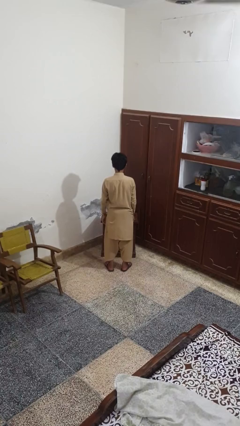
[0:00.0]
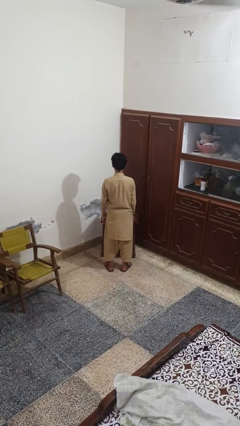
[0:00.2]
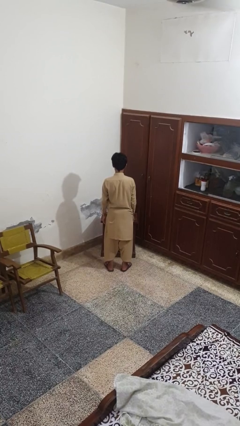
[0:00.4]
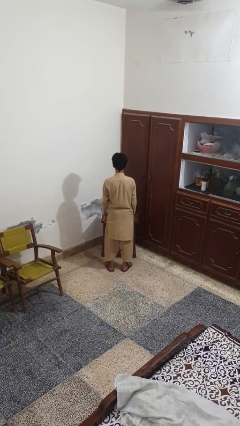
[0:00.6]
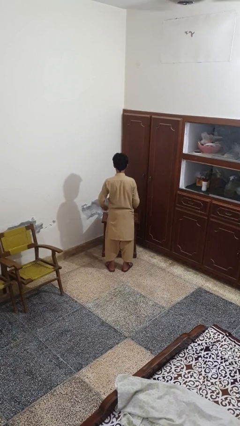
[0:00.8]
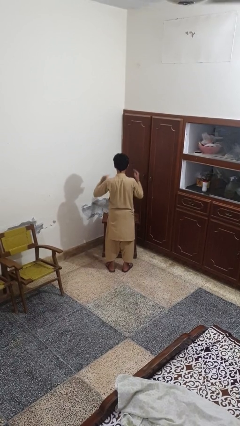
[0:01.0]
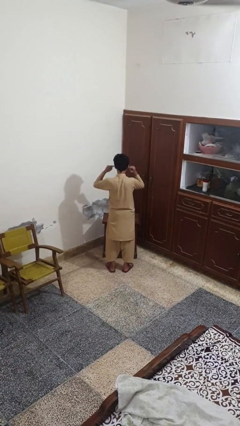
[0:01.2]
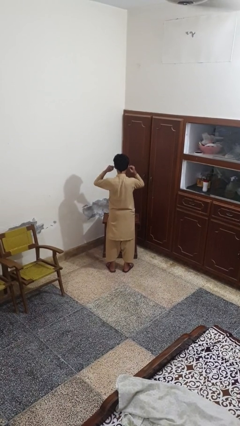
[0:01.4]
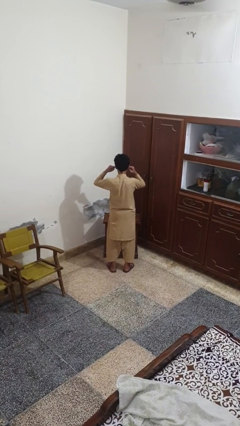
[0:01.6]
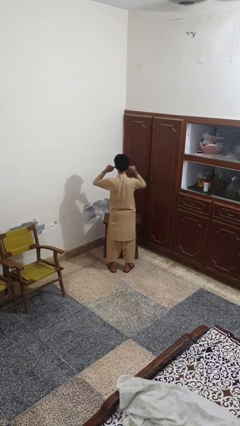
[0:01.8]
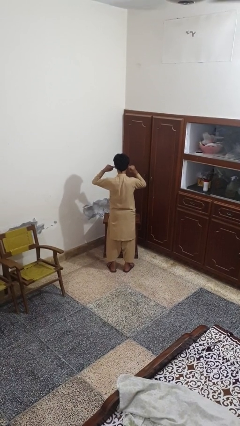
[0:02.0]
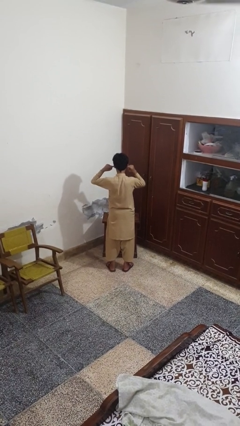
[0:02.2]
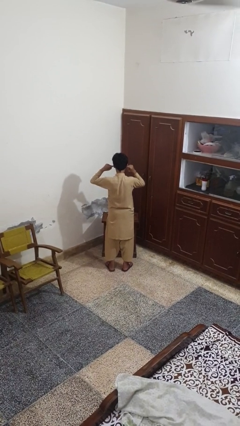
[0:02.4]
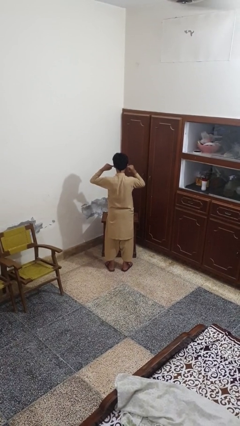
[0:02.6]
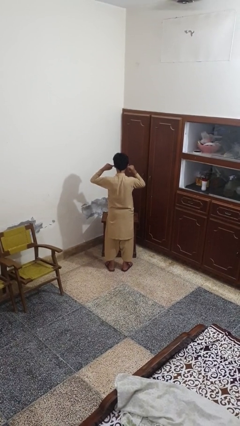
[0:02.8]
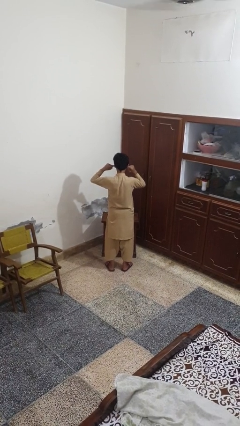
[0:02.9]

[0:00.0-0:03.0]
person puts fingers in ear

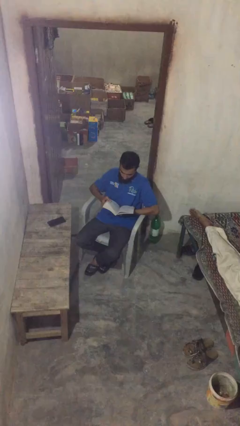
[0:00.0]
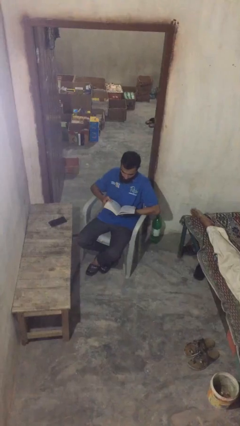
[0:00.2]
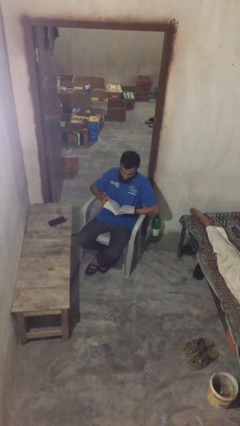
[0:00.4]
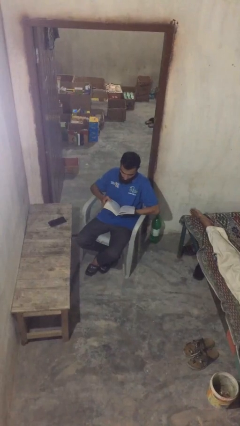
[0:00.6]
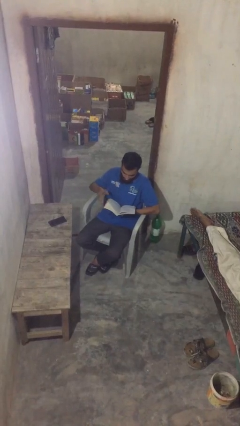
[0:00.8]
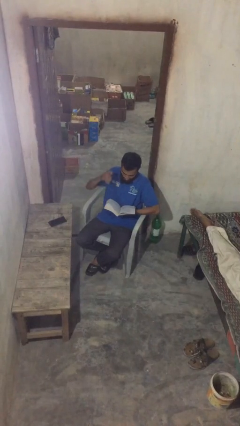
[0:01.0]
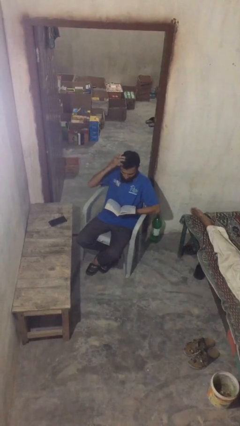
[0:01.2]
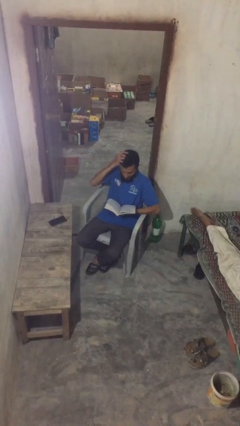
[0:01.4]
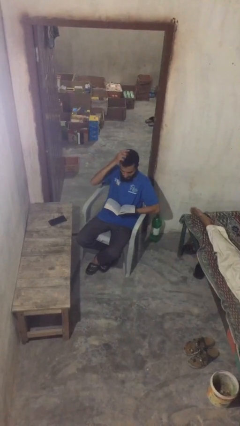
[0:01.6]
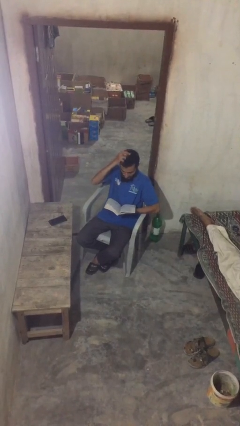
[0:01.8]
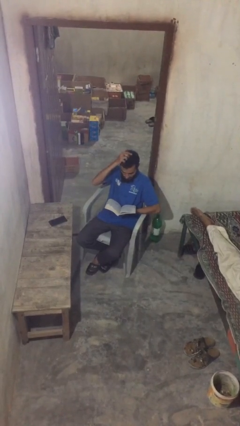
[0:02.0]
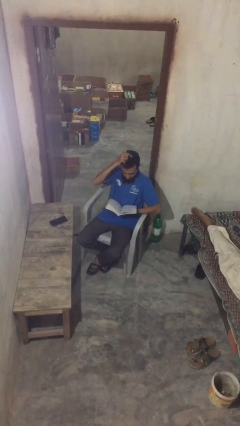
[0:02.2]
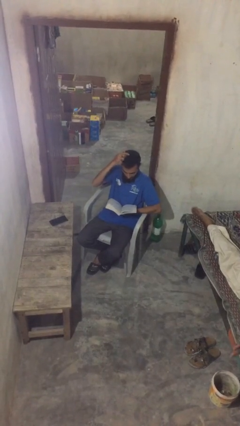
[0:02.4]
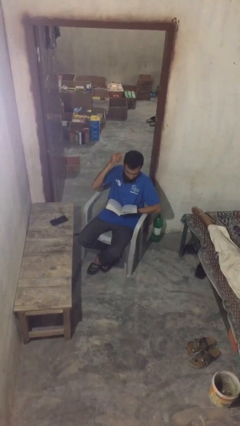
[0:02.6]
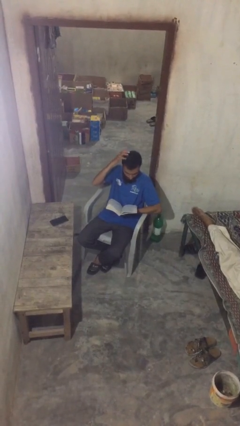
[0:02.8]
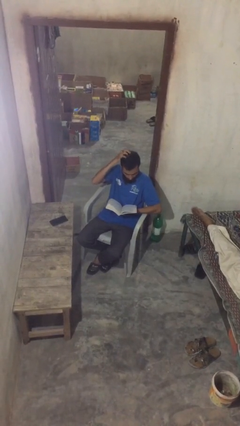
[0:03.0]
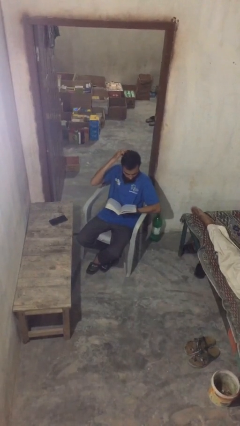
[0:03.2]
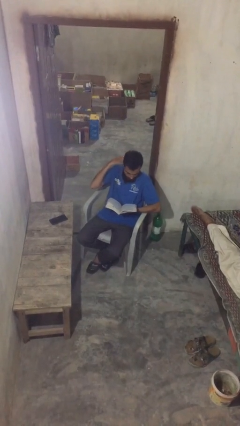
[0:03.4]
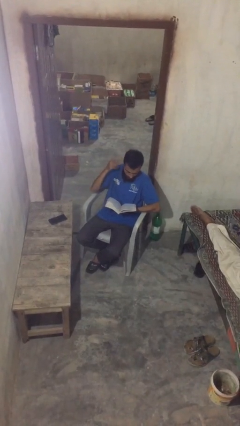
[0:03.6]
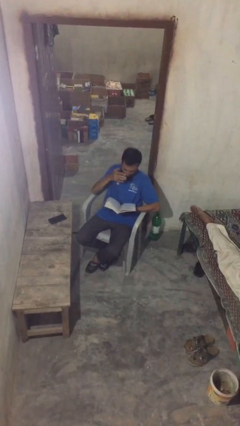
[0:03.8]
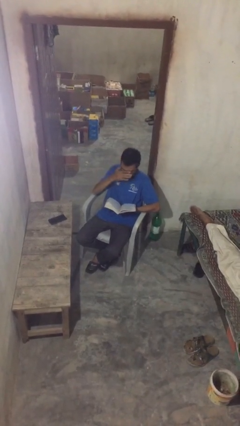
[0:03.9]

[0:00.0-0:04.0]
person reads document

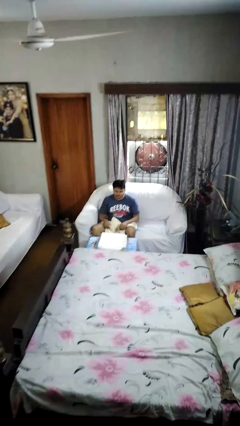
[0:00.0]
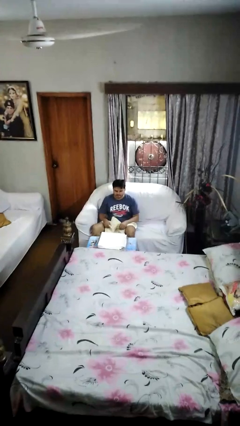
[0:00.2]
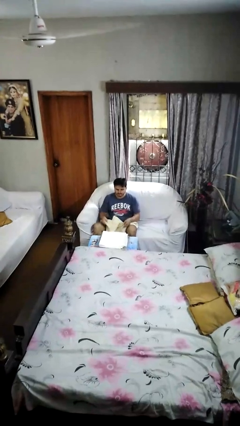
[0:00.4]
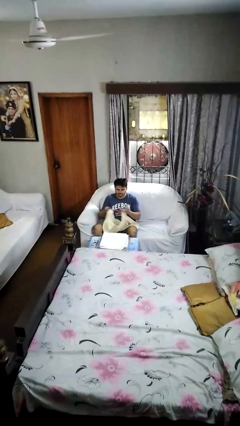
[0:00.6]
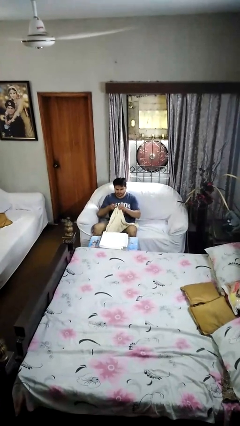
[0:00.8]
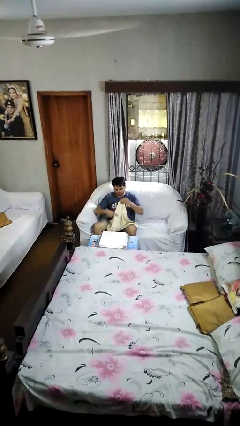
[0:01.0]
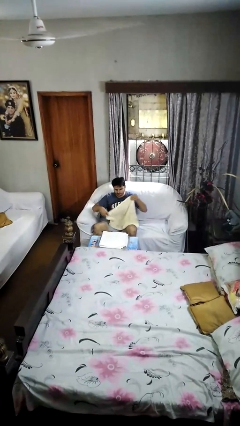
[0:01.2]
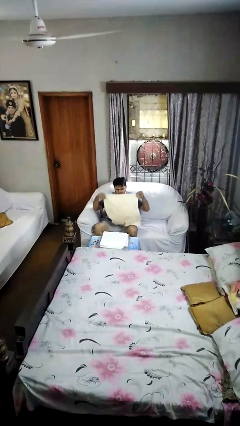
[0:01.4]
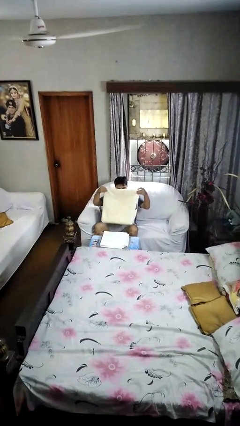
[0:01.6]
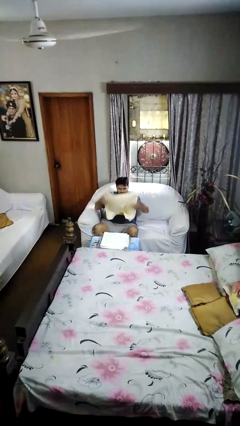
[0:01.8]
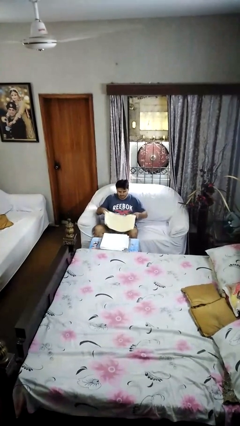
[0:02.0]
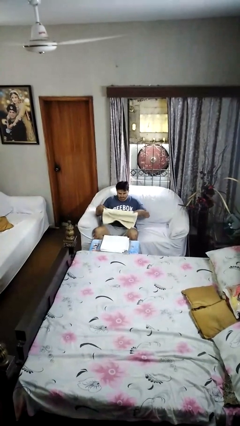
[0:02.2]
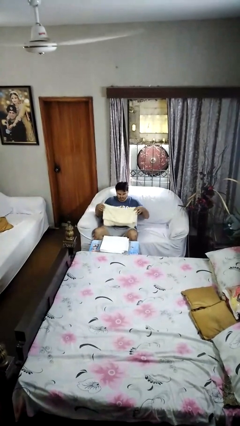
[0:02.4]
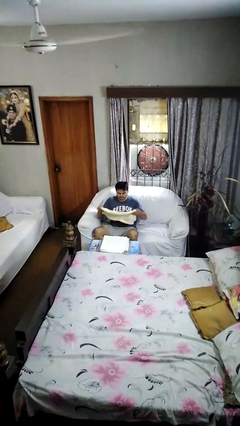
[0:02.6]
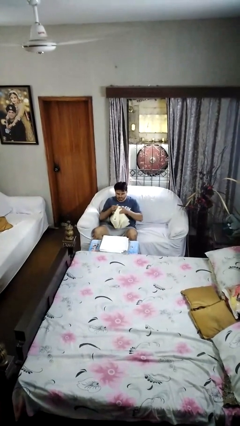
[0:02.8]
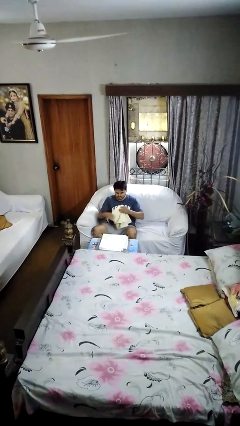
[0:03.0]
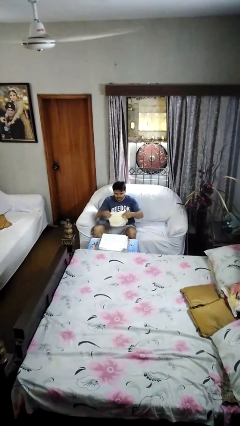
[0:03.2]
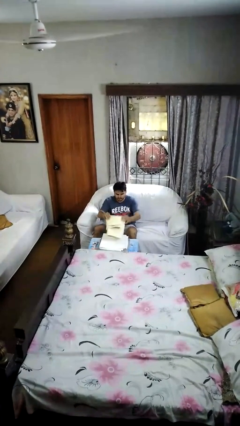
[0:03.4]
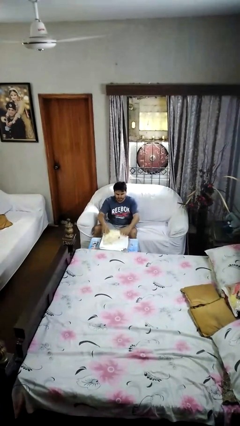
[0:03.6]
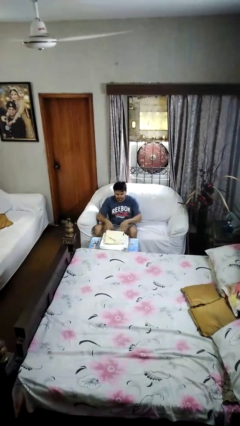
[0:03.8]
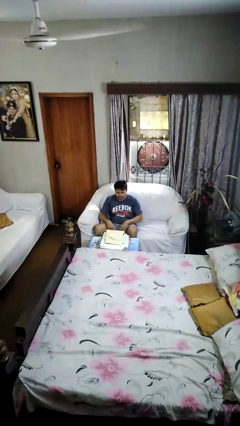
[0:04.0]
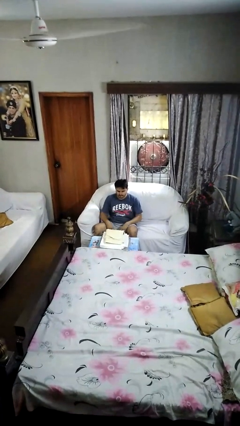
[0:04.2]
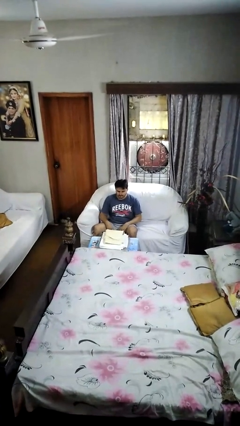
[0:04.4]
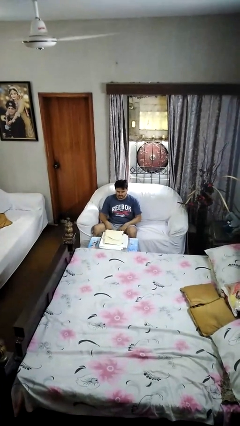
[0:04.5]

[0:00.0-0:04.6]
person folds towel

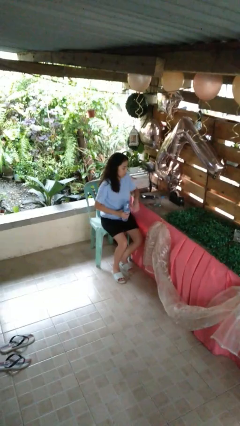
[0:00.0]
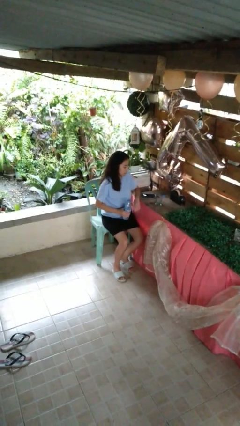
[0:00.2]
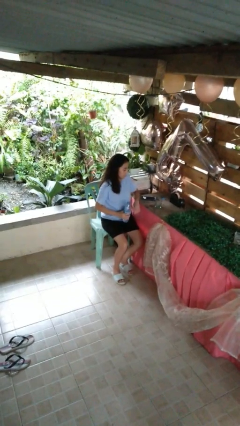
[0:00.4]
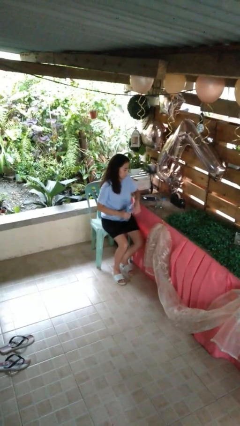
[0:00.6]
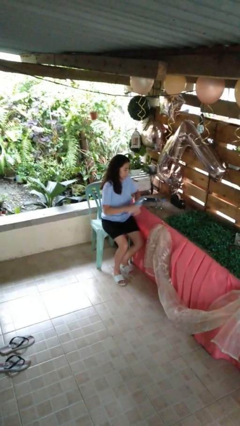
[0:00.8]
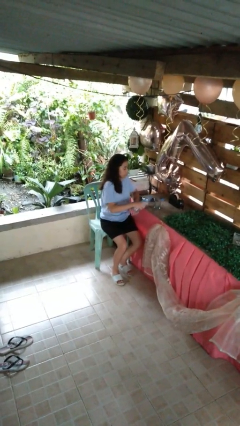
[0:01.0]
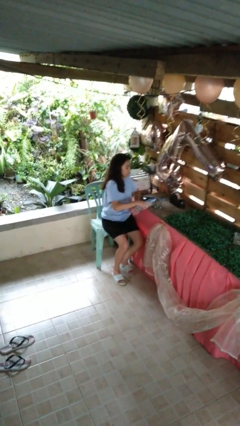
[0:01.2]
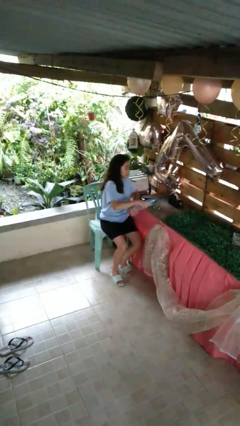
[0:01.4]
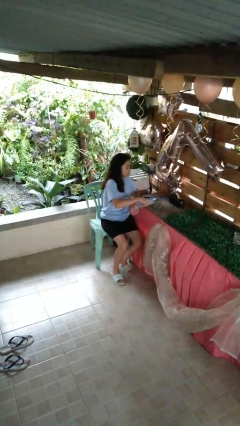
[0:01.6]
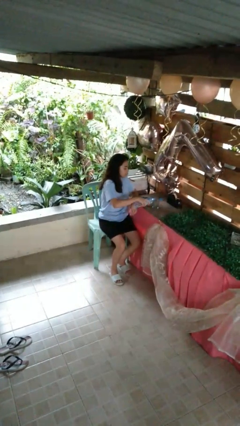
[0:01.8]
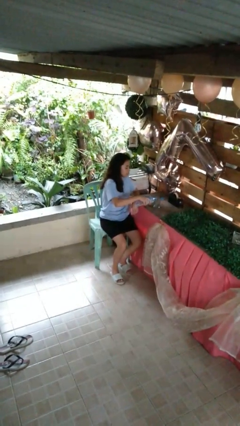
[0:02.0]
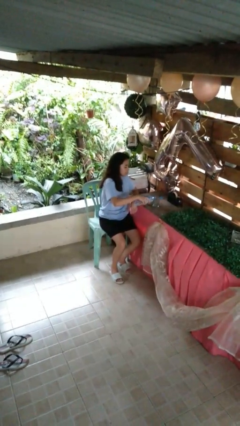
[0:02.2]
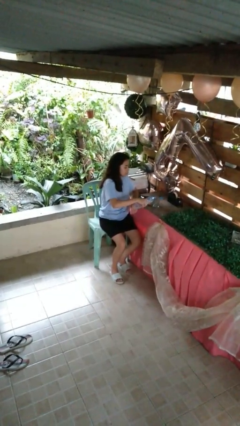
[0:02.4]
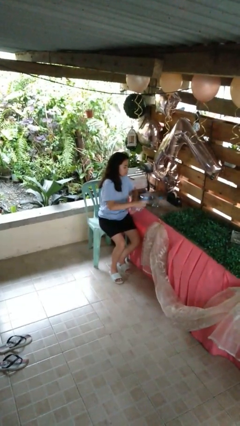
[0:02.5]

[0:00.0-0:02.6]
person pours liquid into cup

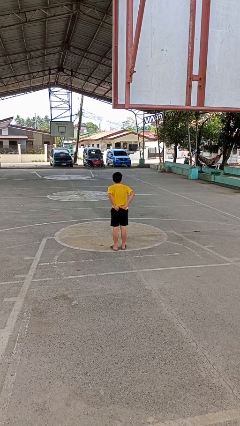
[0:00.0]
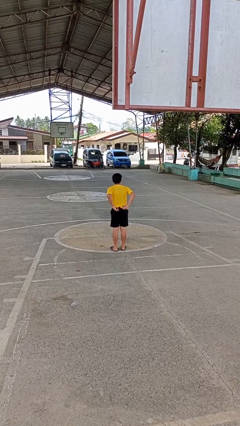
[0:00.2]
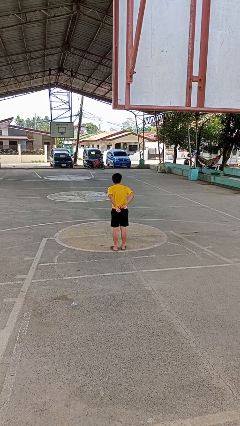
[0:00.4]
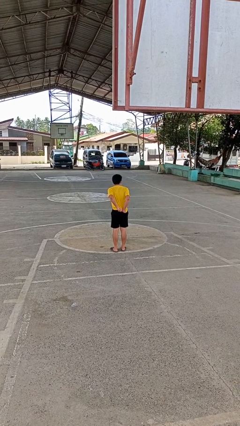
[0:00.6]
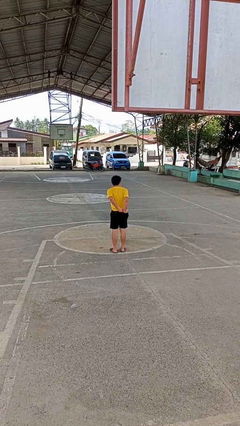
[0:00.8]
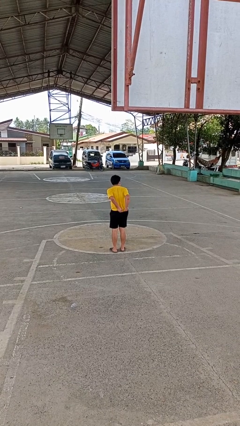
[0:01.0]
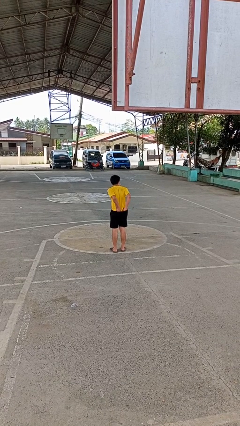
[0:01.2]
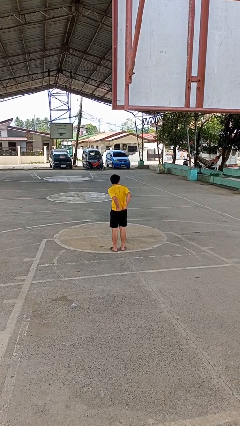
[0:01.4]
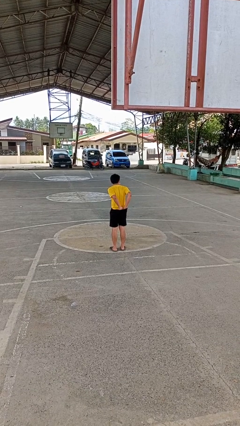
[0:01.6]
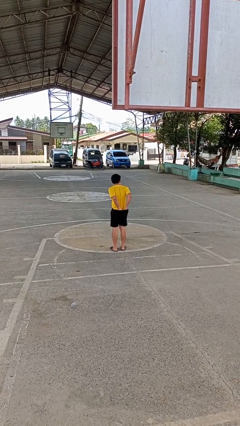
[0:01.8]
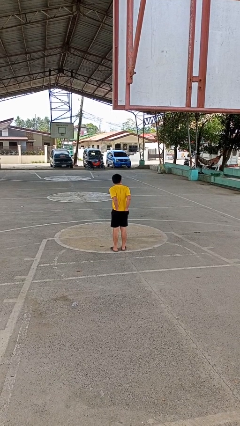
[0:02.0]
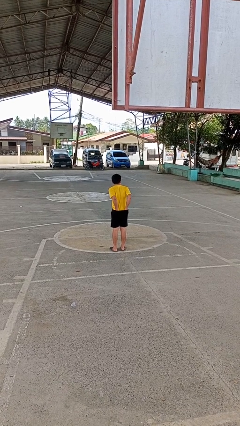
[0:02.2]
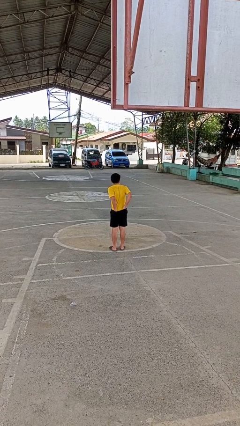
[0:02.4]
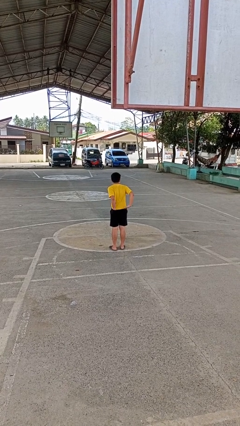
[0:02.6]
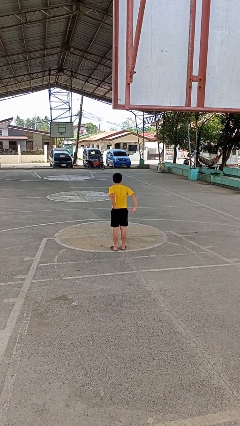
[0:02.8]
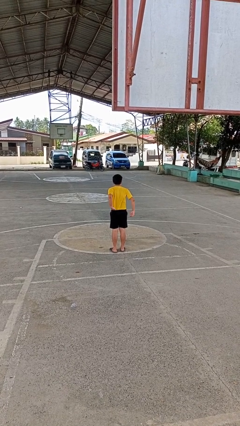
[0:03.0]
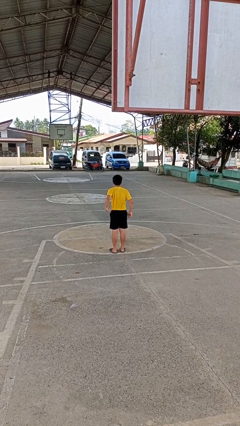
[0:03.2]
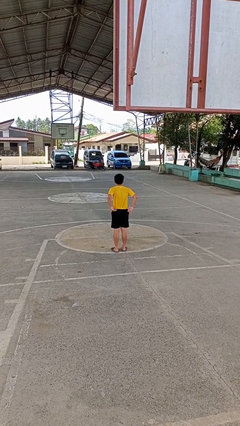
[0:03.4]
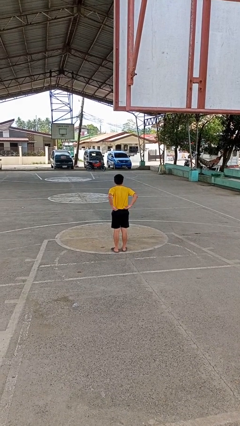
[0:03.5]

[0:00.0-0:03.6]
person tucks in shirt
